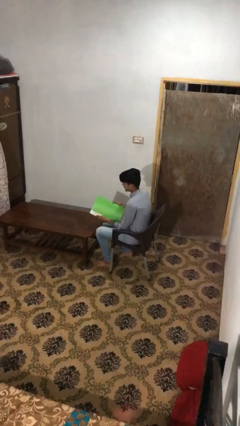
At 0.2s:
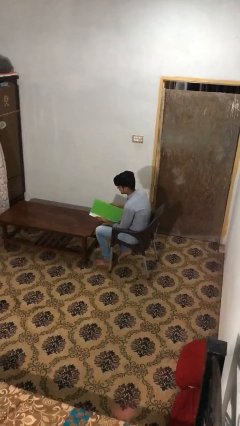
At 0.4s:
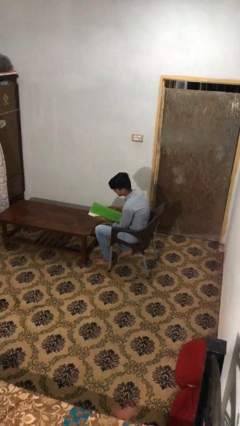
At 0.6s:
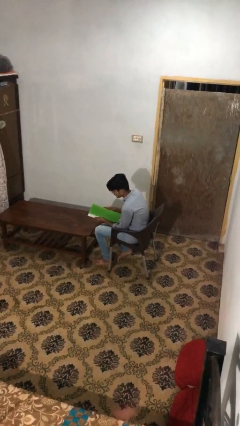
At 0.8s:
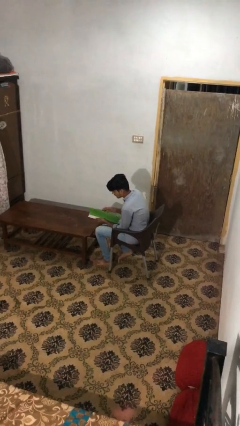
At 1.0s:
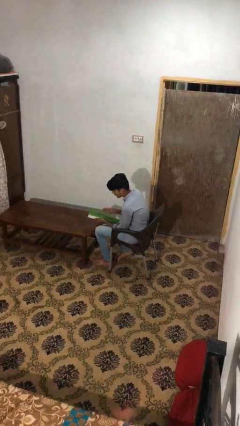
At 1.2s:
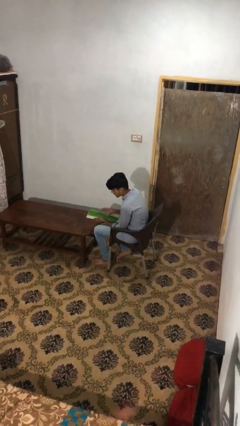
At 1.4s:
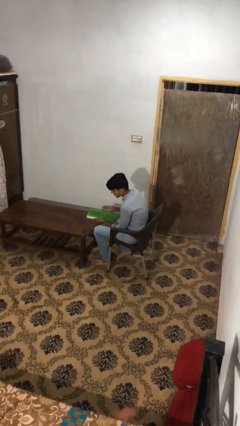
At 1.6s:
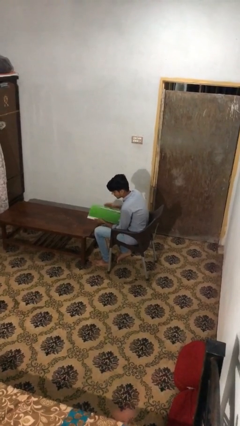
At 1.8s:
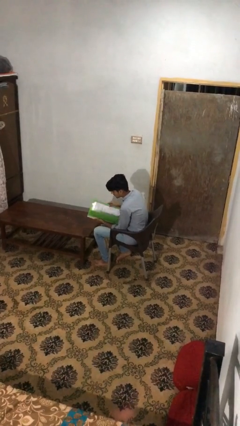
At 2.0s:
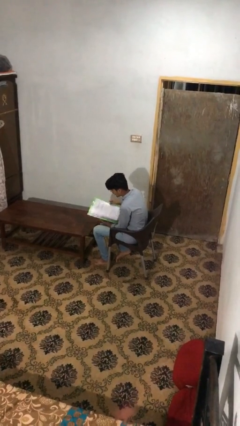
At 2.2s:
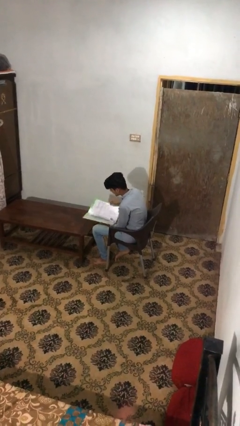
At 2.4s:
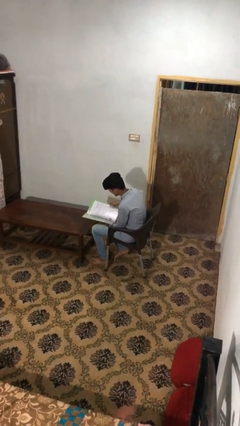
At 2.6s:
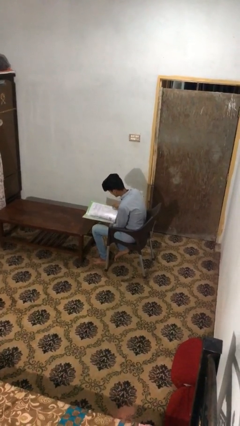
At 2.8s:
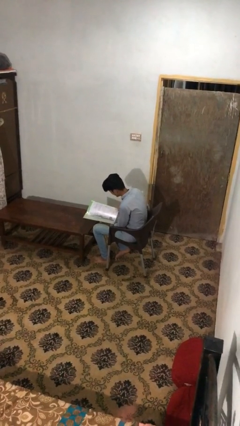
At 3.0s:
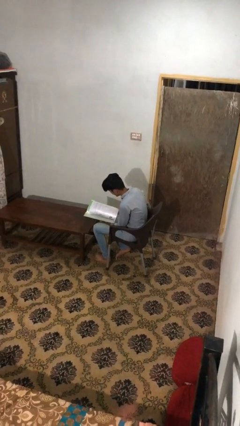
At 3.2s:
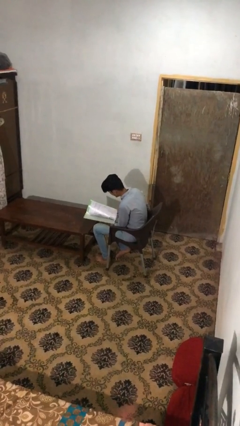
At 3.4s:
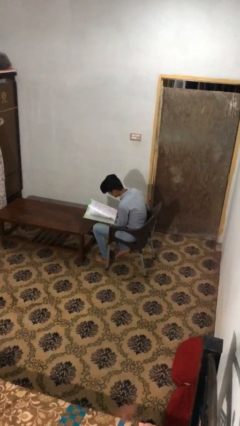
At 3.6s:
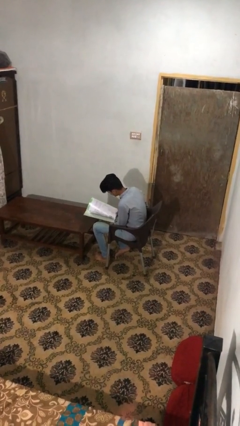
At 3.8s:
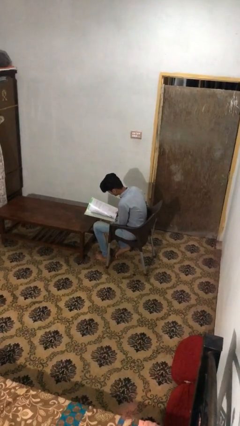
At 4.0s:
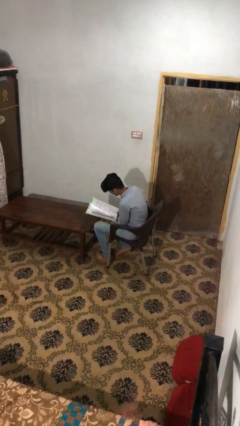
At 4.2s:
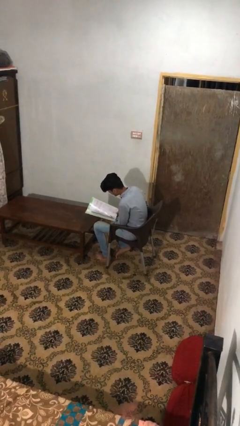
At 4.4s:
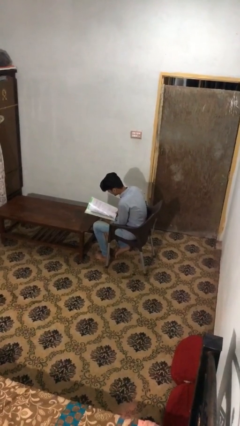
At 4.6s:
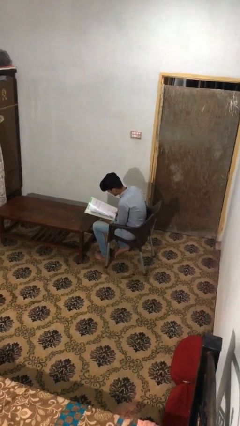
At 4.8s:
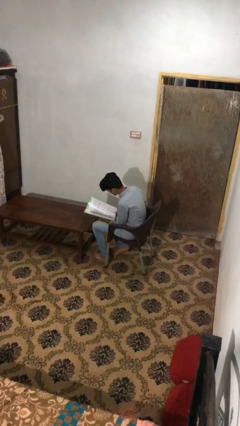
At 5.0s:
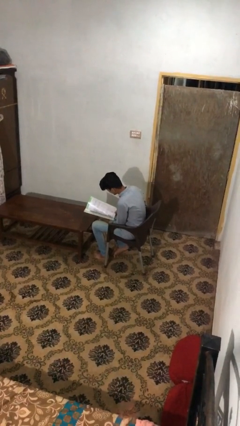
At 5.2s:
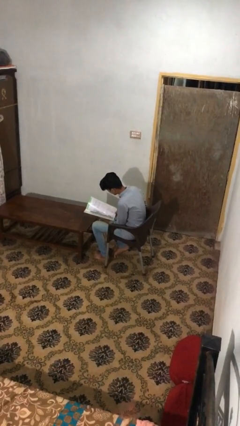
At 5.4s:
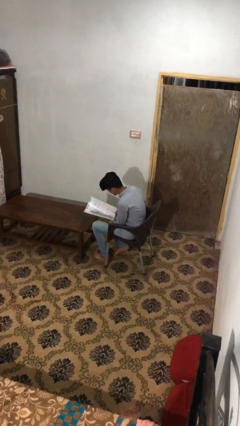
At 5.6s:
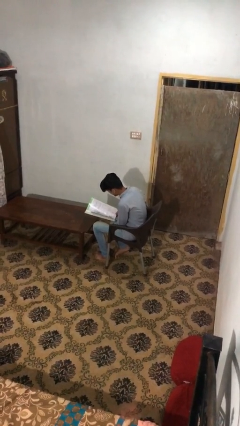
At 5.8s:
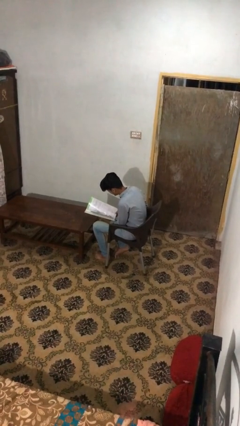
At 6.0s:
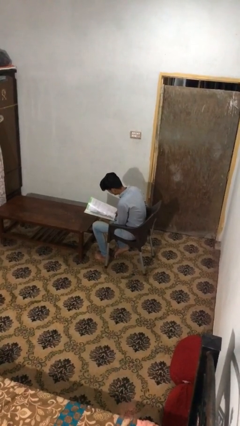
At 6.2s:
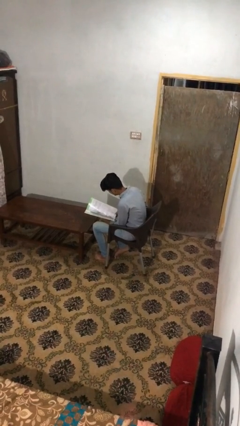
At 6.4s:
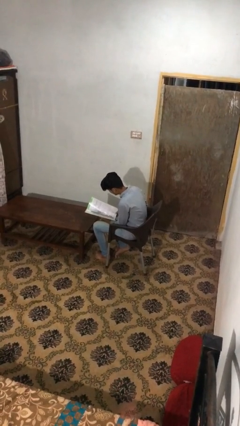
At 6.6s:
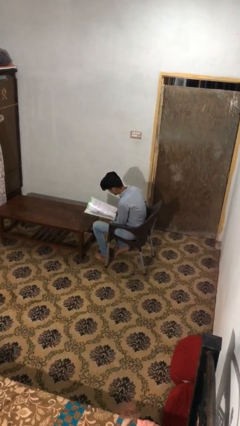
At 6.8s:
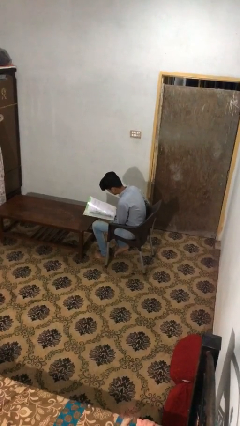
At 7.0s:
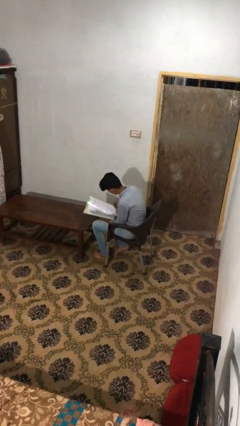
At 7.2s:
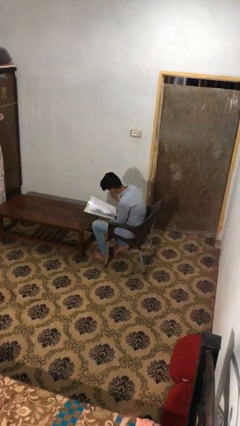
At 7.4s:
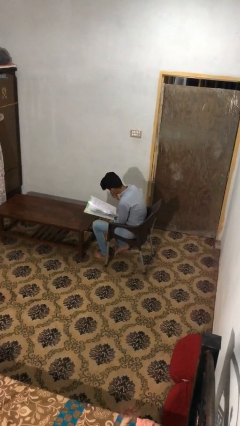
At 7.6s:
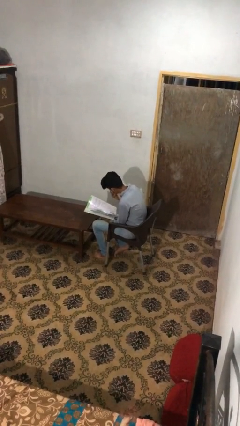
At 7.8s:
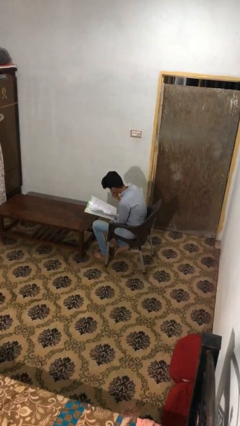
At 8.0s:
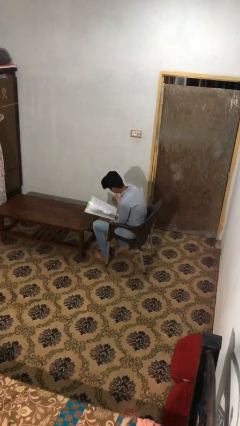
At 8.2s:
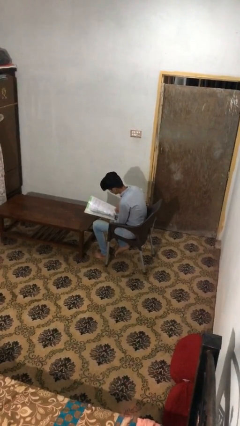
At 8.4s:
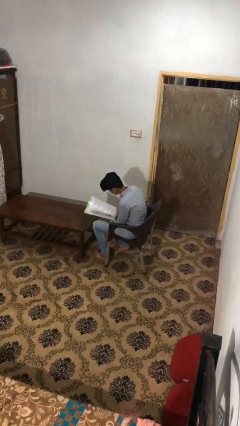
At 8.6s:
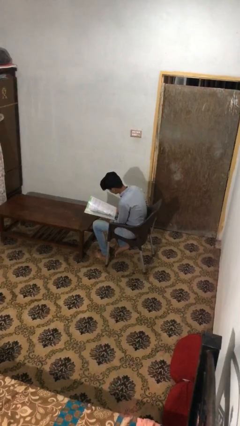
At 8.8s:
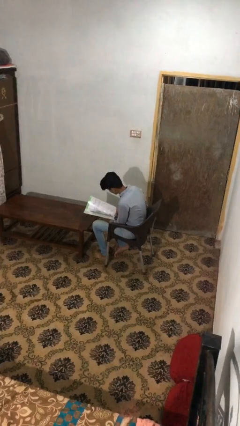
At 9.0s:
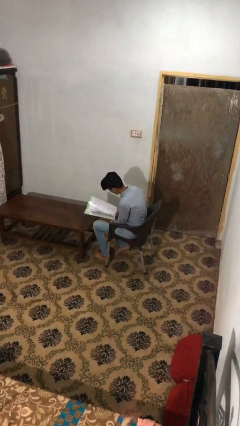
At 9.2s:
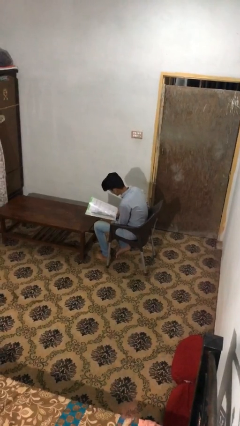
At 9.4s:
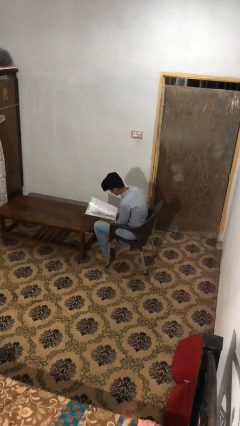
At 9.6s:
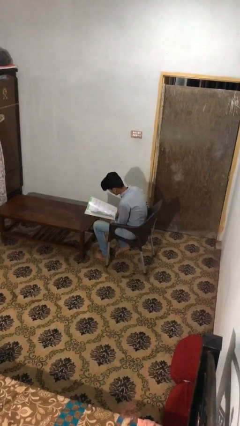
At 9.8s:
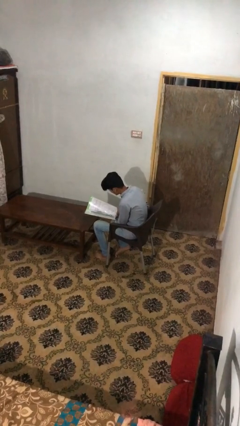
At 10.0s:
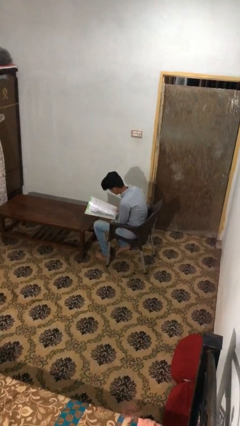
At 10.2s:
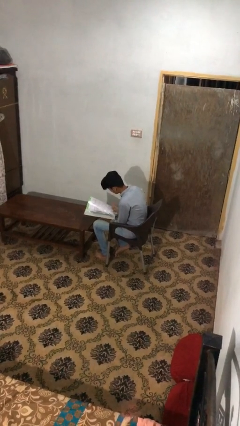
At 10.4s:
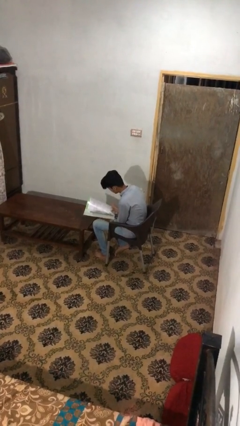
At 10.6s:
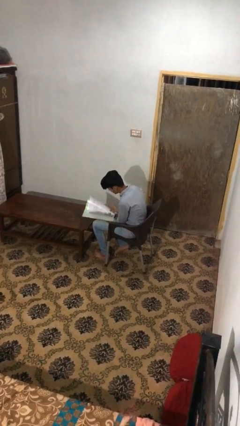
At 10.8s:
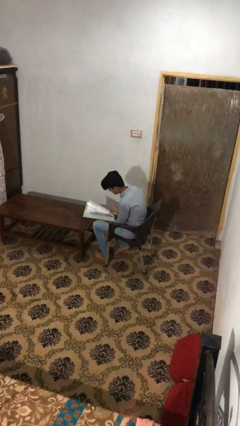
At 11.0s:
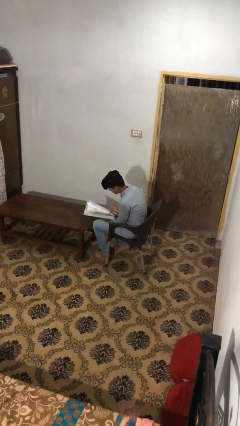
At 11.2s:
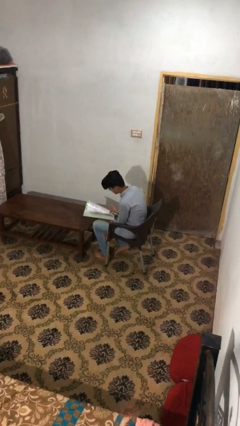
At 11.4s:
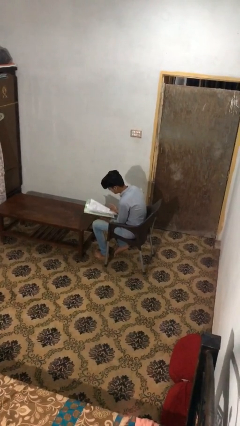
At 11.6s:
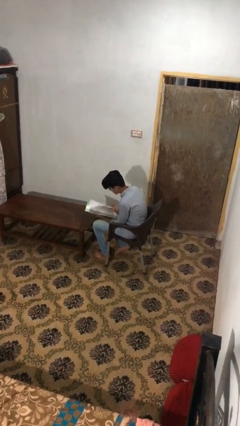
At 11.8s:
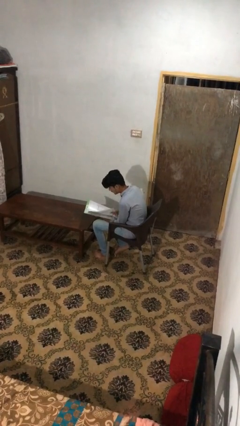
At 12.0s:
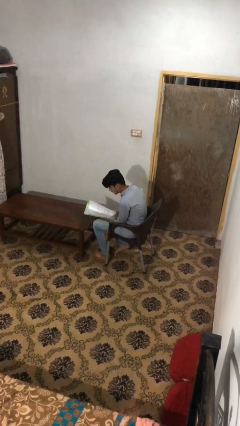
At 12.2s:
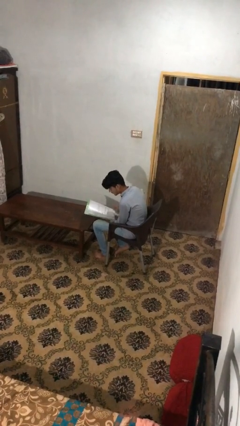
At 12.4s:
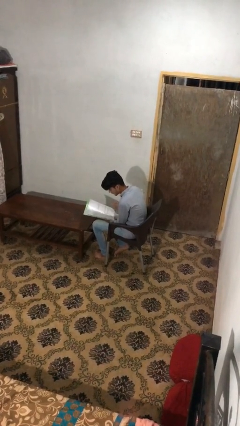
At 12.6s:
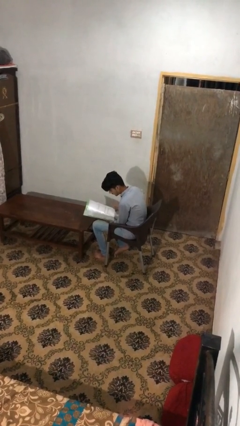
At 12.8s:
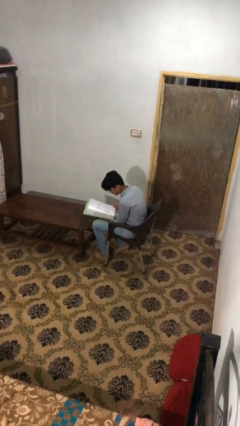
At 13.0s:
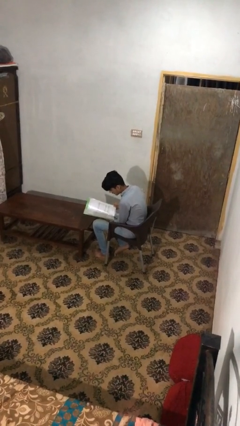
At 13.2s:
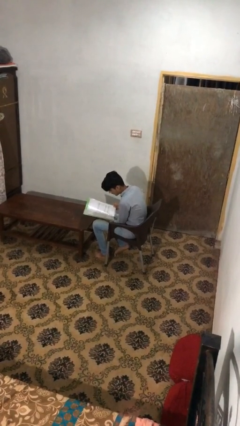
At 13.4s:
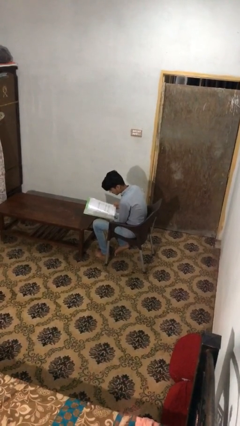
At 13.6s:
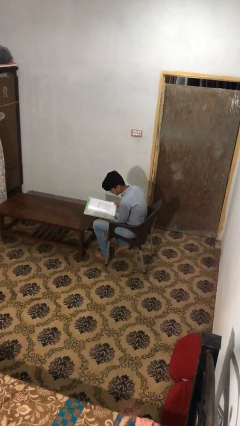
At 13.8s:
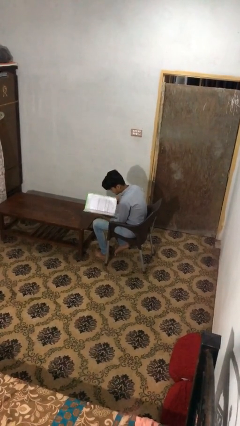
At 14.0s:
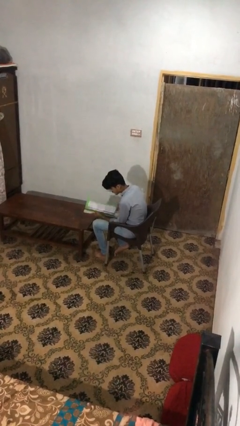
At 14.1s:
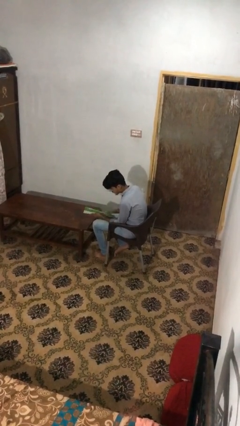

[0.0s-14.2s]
person reads document

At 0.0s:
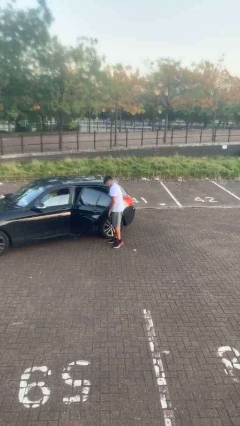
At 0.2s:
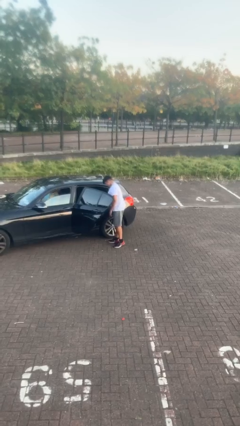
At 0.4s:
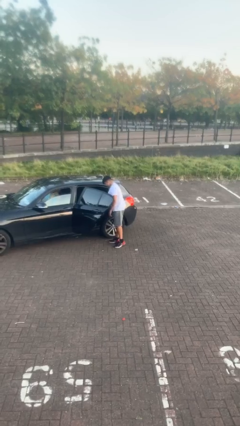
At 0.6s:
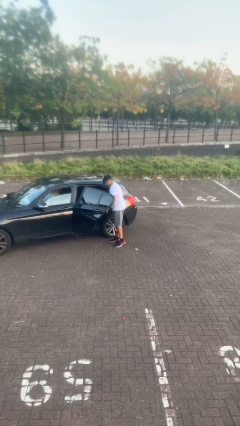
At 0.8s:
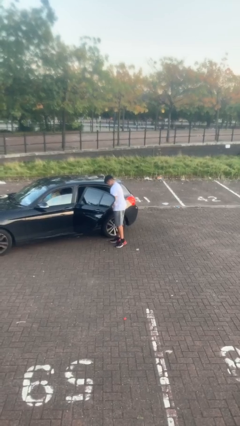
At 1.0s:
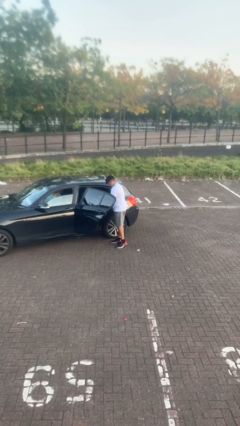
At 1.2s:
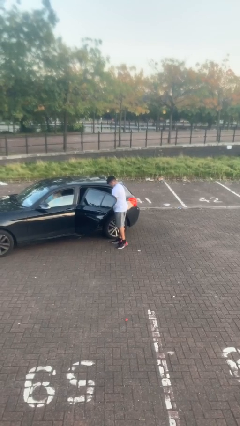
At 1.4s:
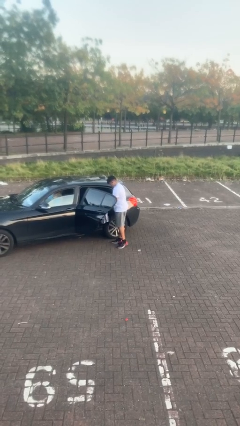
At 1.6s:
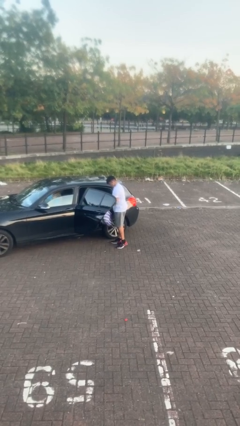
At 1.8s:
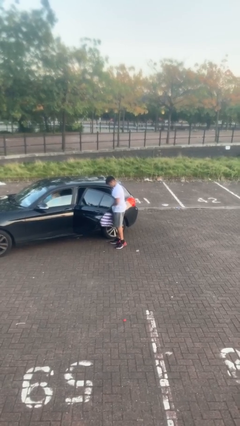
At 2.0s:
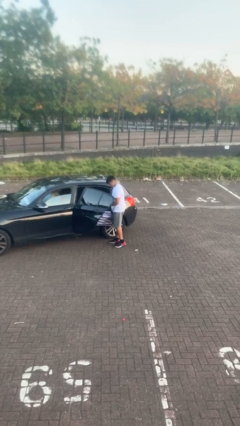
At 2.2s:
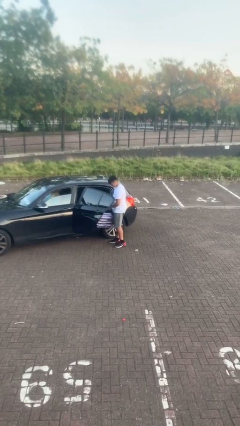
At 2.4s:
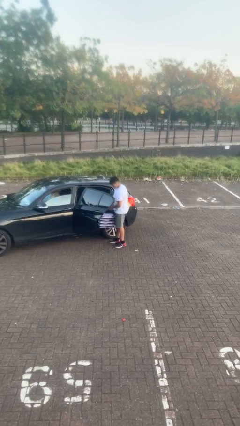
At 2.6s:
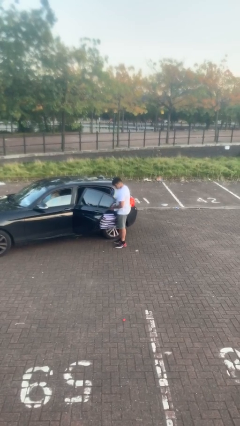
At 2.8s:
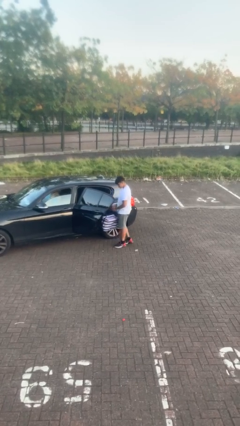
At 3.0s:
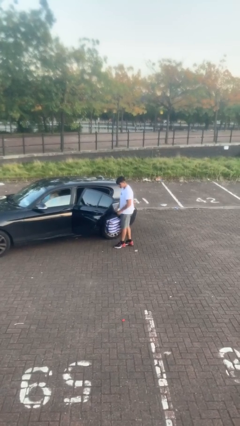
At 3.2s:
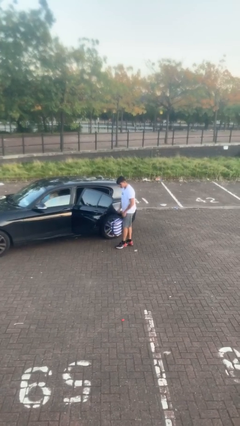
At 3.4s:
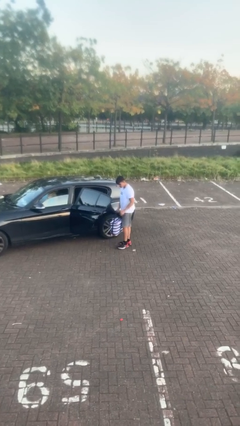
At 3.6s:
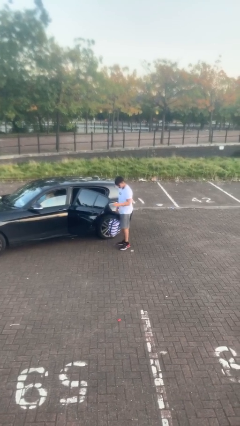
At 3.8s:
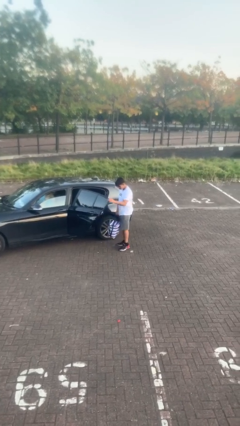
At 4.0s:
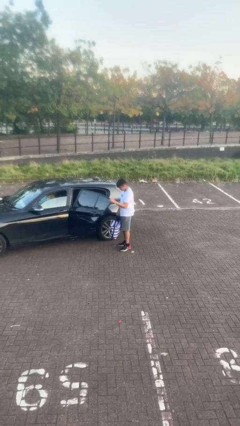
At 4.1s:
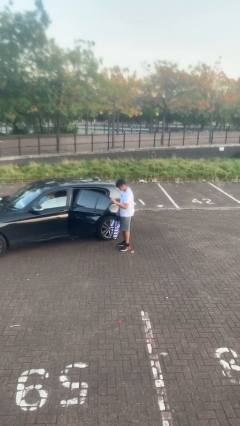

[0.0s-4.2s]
person unloads car
